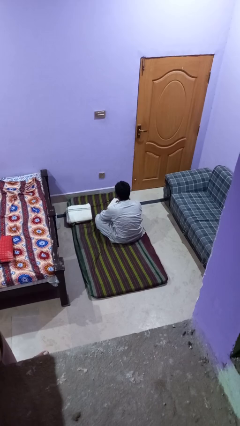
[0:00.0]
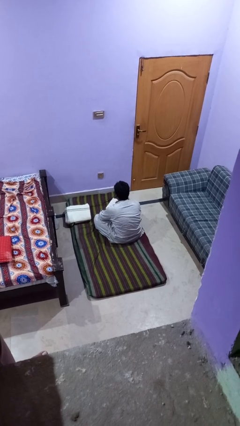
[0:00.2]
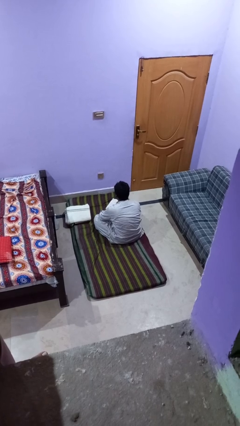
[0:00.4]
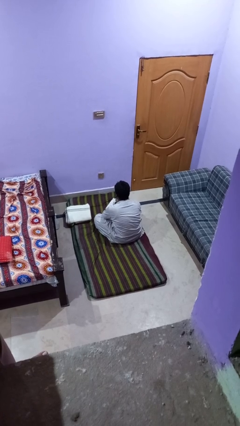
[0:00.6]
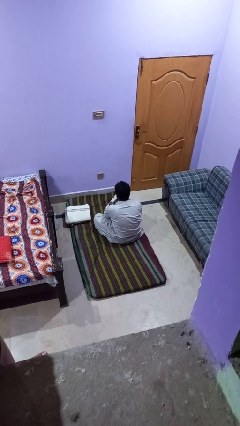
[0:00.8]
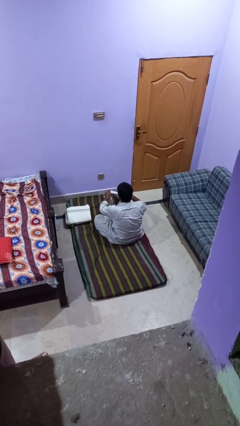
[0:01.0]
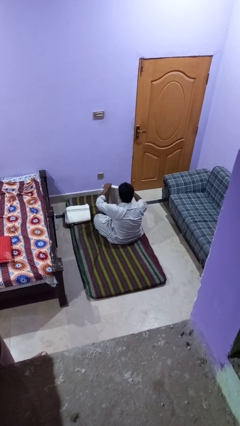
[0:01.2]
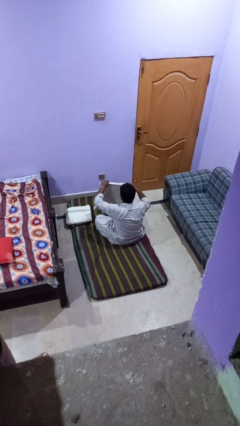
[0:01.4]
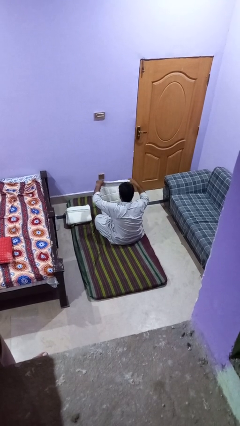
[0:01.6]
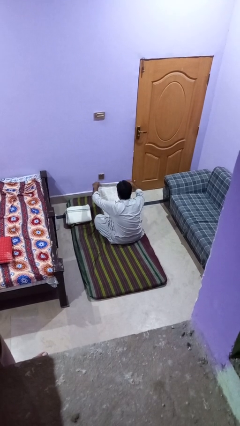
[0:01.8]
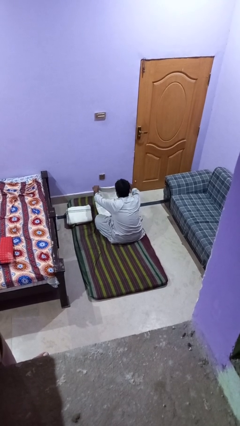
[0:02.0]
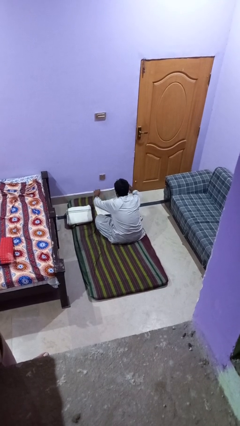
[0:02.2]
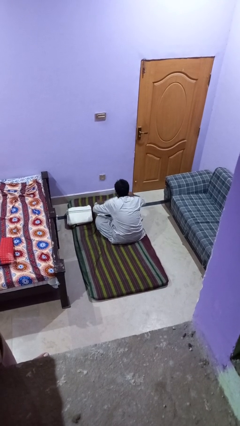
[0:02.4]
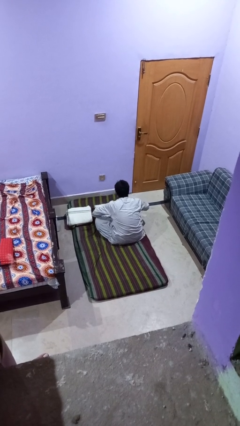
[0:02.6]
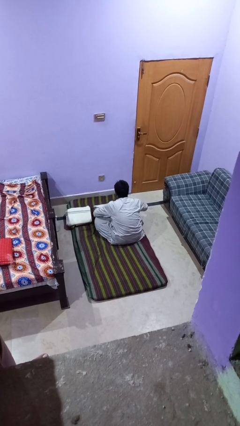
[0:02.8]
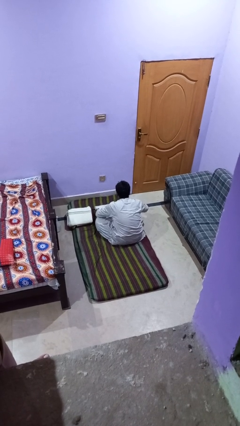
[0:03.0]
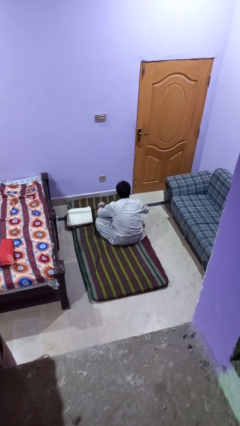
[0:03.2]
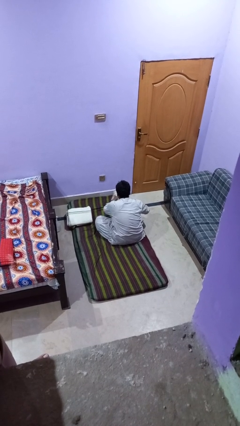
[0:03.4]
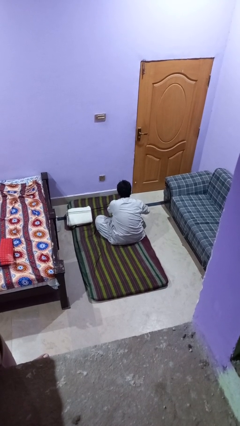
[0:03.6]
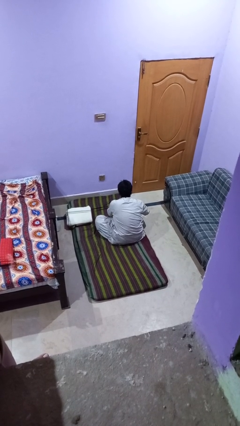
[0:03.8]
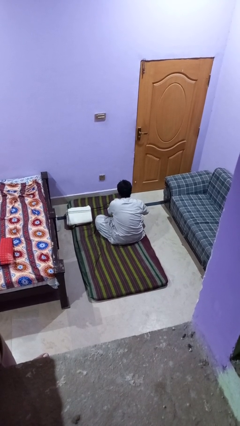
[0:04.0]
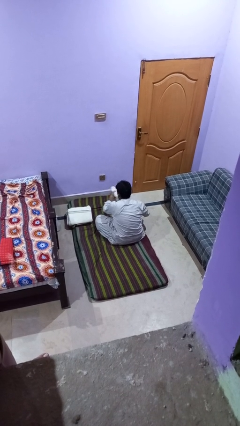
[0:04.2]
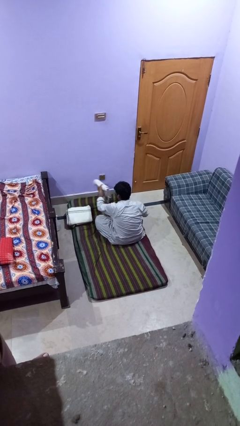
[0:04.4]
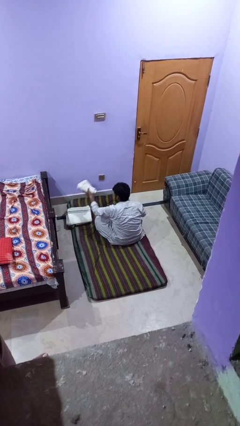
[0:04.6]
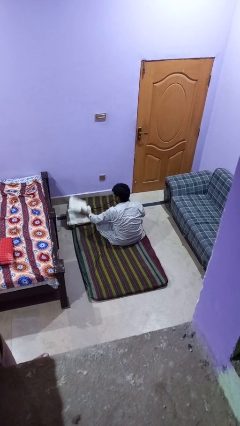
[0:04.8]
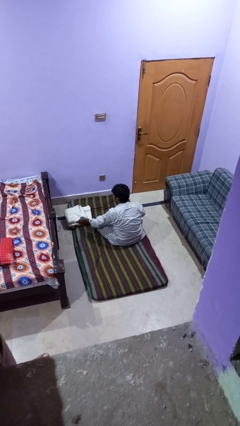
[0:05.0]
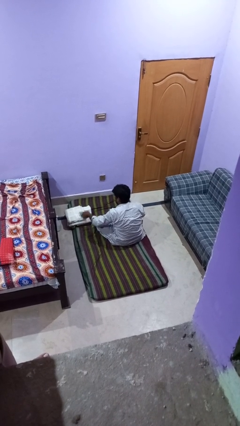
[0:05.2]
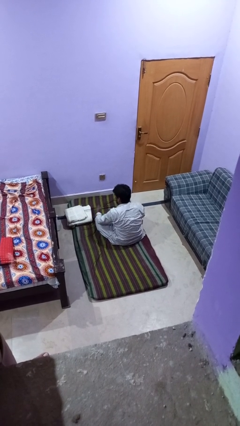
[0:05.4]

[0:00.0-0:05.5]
person folds towel

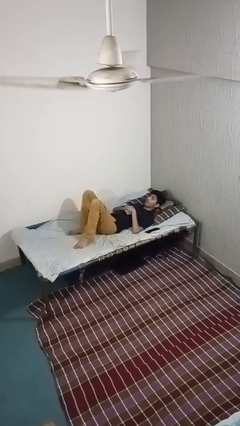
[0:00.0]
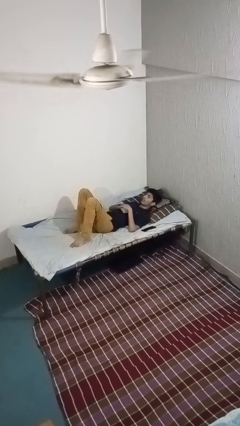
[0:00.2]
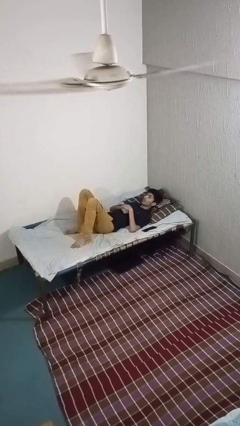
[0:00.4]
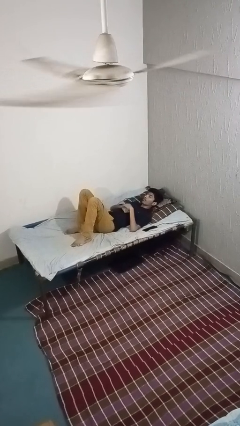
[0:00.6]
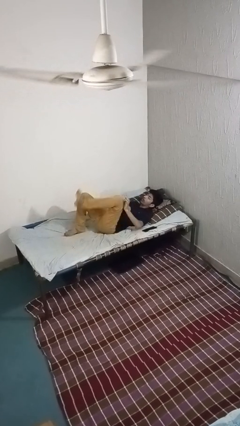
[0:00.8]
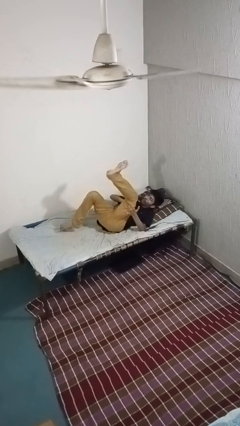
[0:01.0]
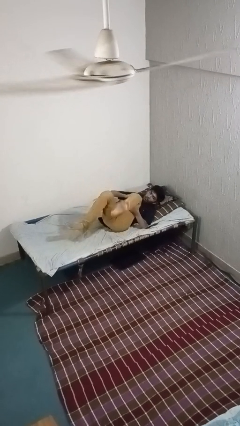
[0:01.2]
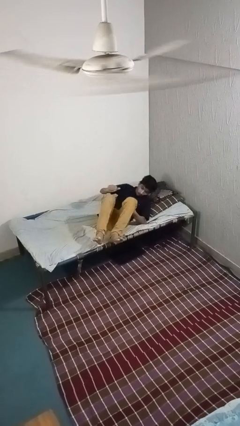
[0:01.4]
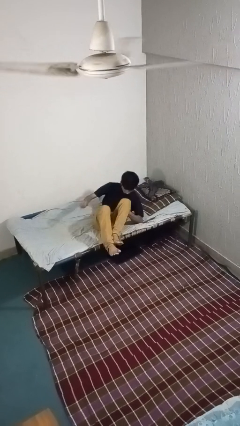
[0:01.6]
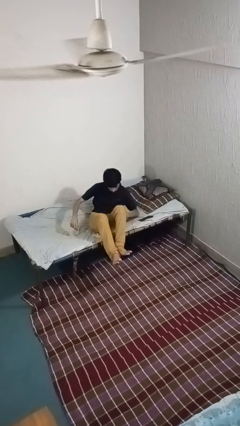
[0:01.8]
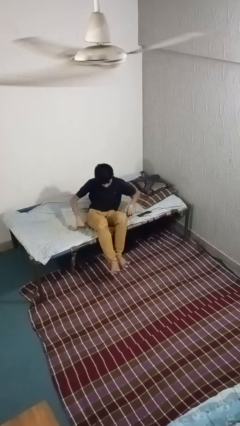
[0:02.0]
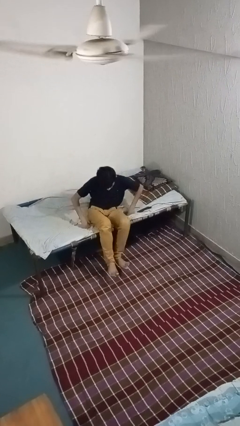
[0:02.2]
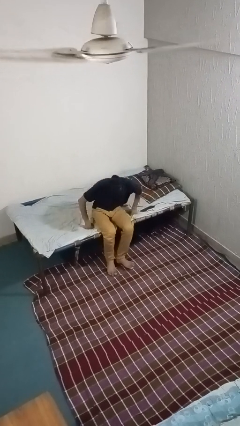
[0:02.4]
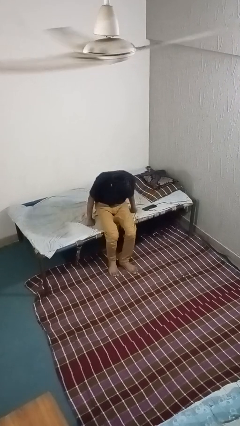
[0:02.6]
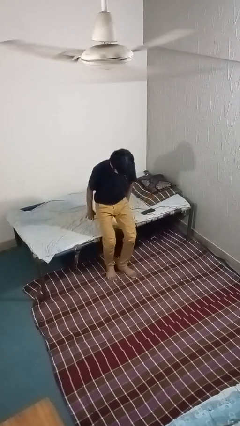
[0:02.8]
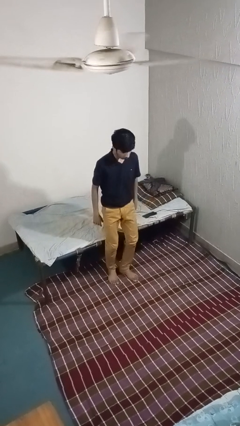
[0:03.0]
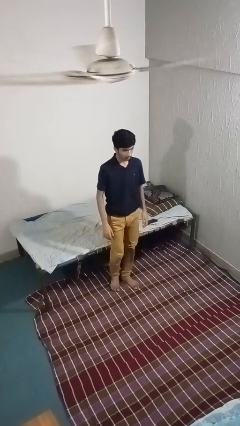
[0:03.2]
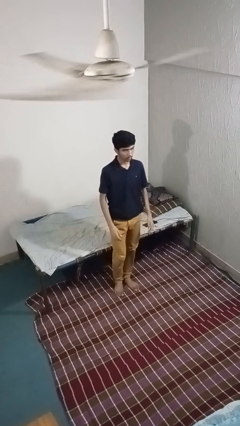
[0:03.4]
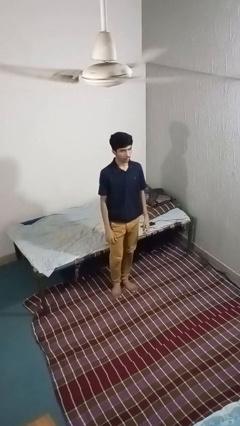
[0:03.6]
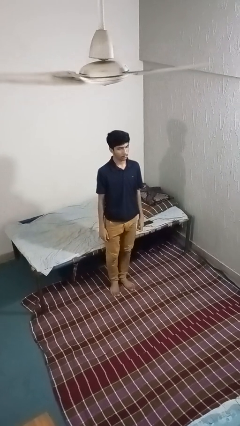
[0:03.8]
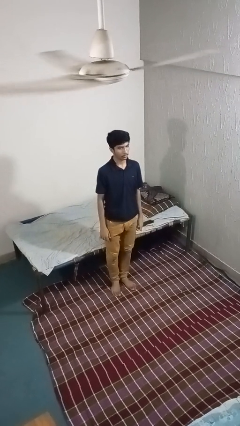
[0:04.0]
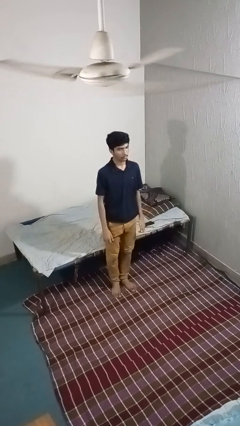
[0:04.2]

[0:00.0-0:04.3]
person stands up

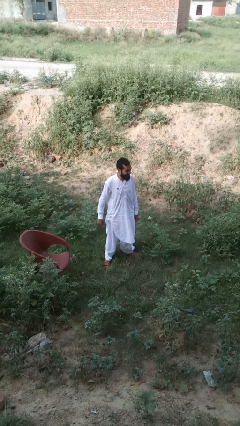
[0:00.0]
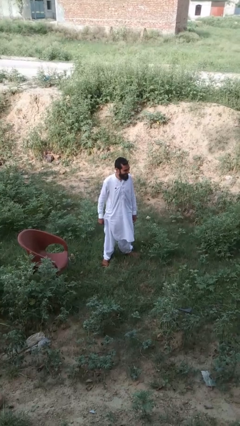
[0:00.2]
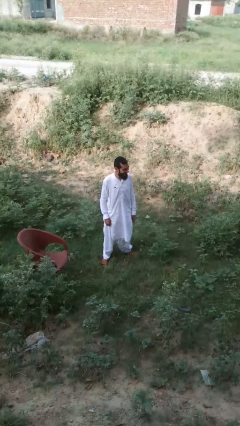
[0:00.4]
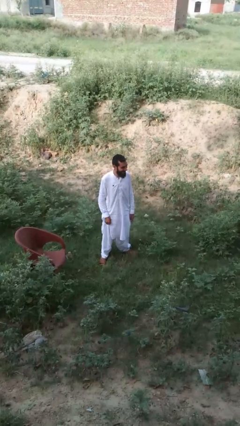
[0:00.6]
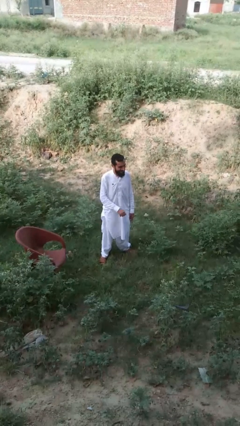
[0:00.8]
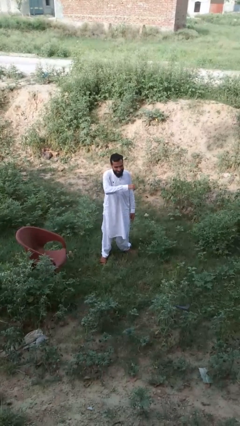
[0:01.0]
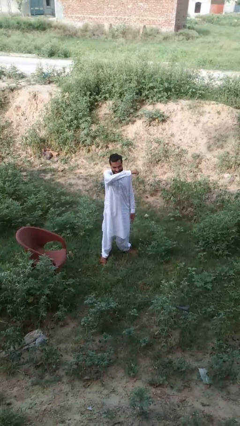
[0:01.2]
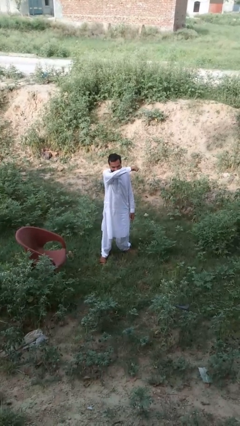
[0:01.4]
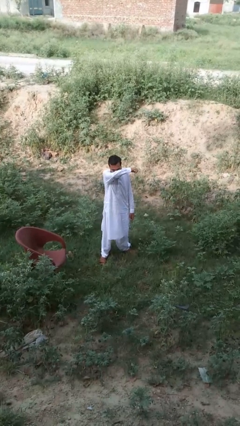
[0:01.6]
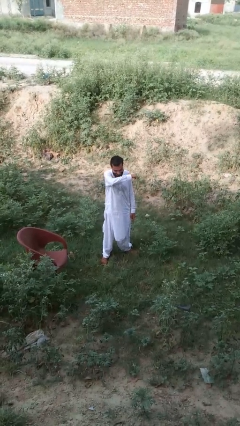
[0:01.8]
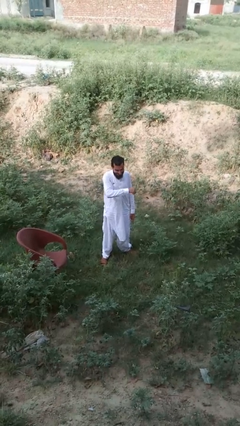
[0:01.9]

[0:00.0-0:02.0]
person sneezes into arm

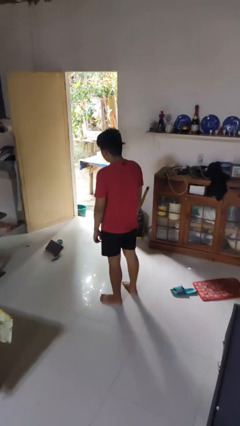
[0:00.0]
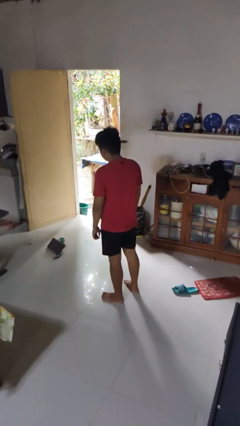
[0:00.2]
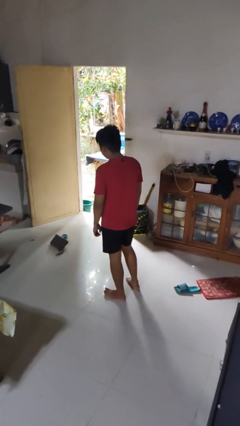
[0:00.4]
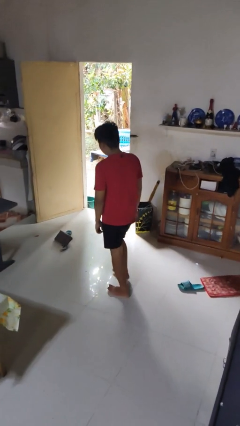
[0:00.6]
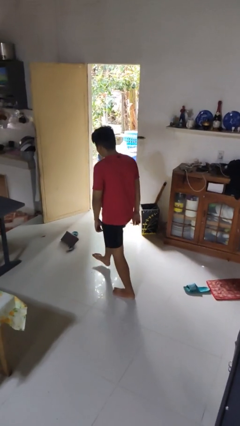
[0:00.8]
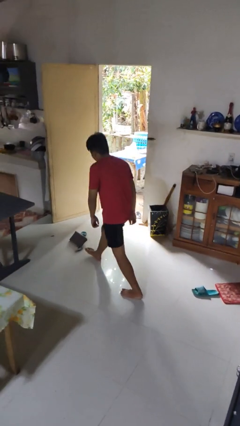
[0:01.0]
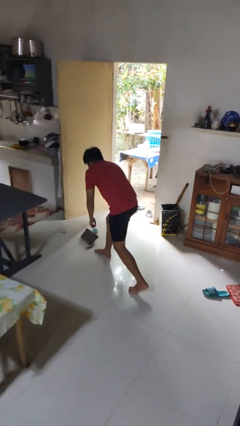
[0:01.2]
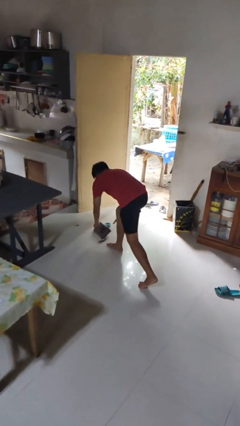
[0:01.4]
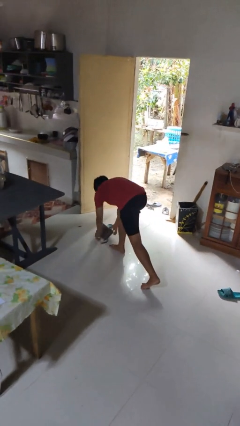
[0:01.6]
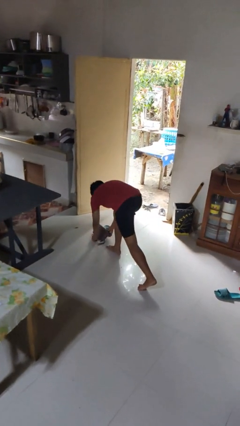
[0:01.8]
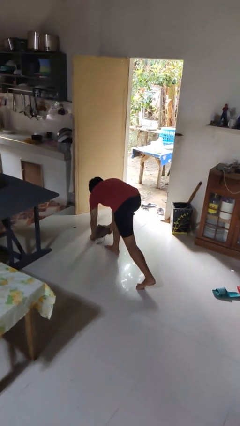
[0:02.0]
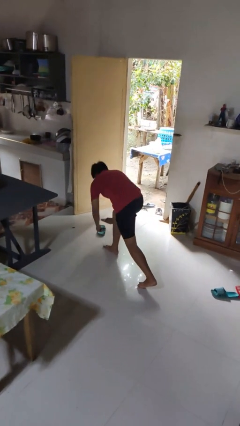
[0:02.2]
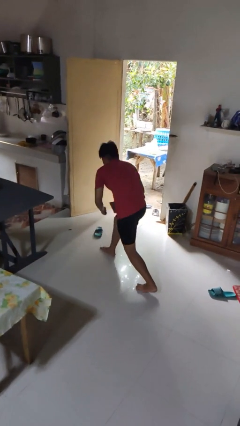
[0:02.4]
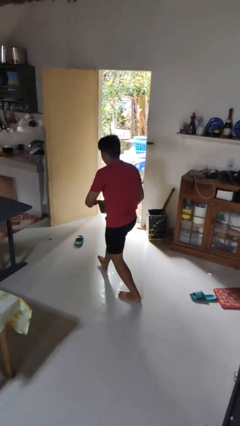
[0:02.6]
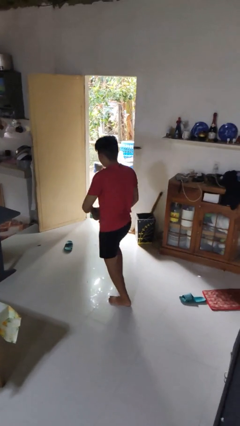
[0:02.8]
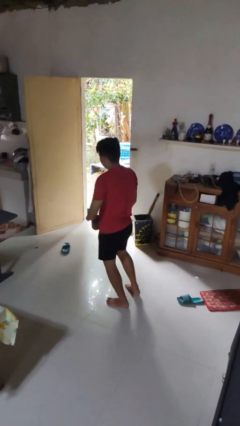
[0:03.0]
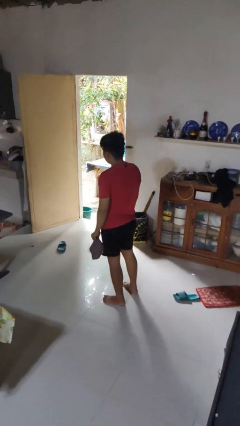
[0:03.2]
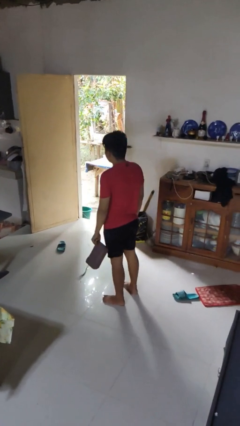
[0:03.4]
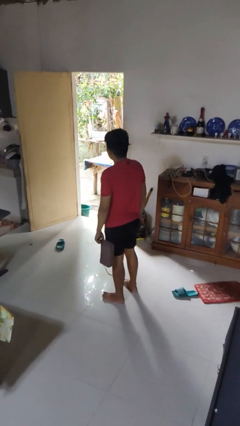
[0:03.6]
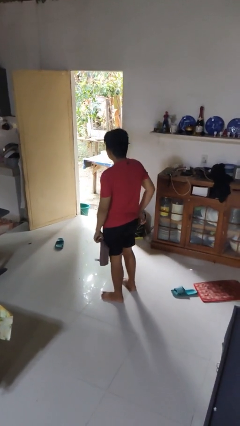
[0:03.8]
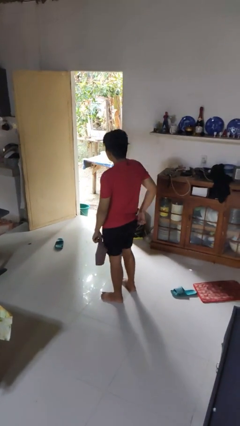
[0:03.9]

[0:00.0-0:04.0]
person picks up object from floor

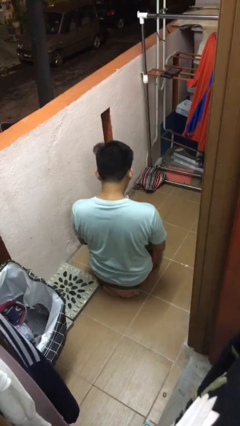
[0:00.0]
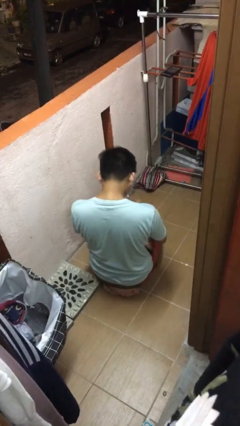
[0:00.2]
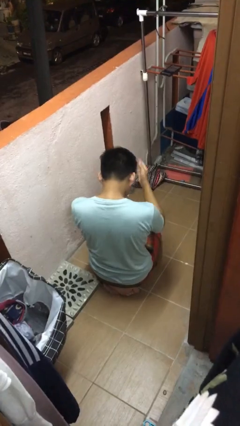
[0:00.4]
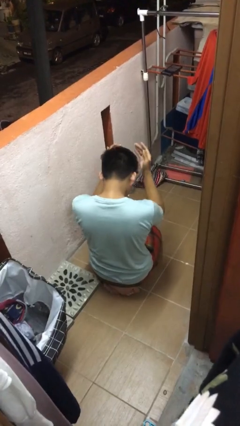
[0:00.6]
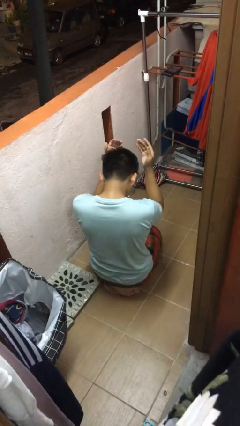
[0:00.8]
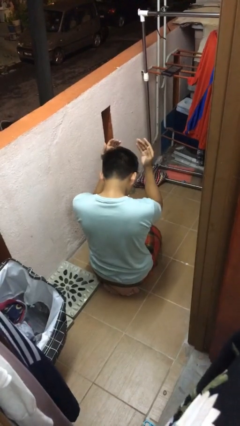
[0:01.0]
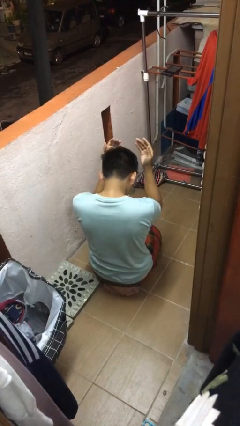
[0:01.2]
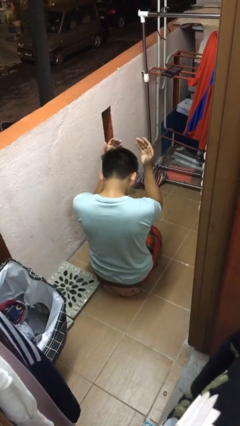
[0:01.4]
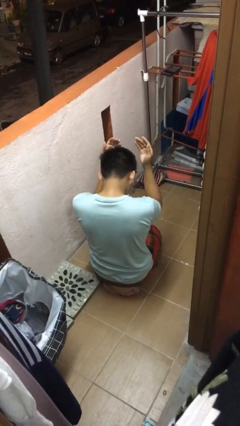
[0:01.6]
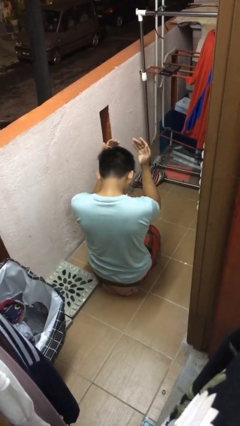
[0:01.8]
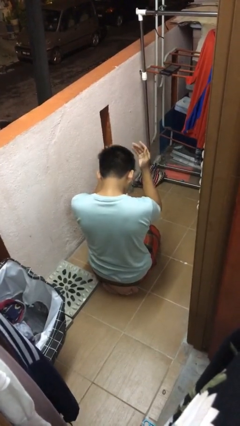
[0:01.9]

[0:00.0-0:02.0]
person prays
